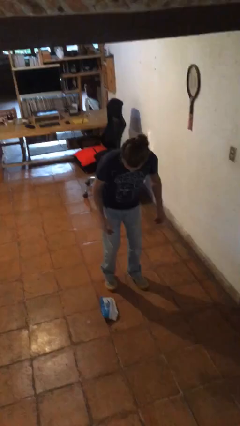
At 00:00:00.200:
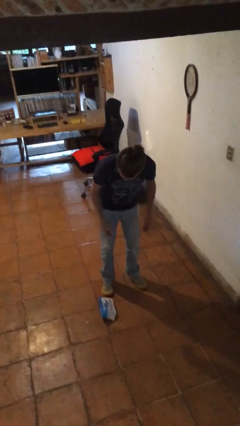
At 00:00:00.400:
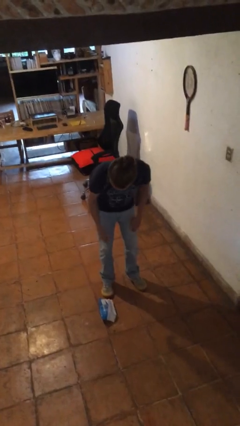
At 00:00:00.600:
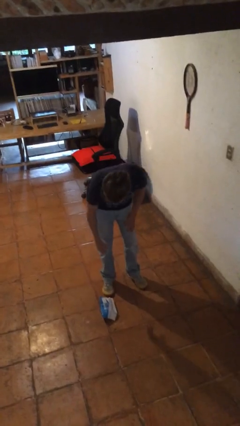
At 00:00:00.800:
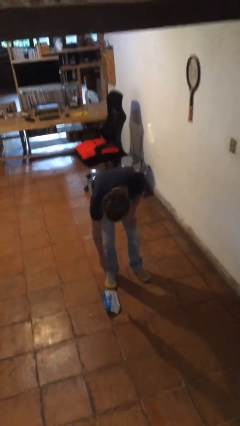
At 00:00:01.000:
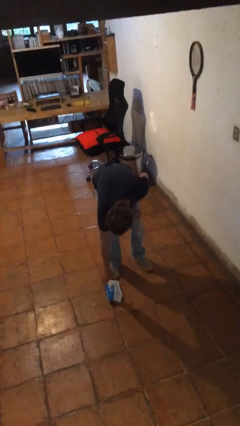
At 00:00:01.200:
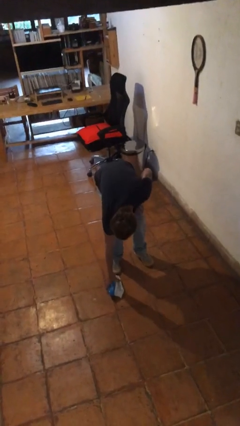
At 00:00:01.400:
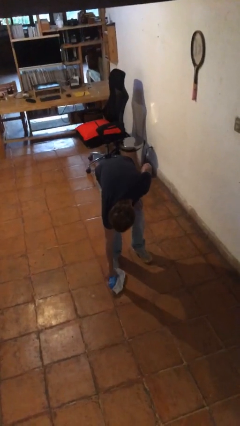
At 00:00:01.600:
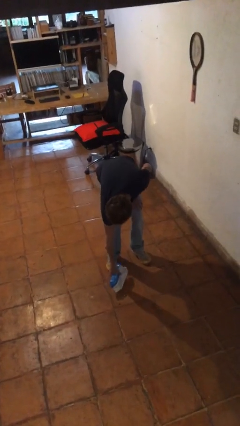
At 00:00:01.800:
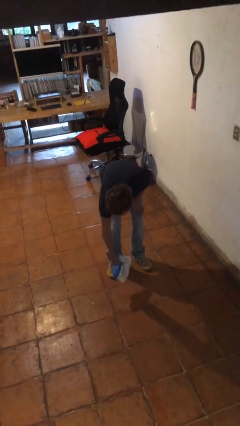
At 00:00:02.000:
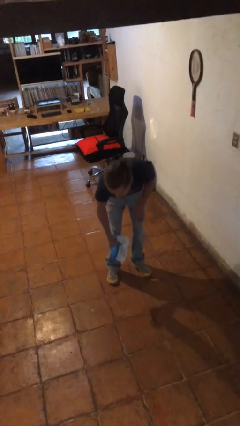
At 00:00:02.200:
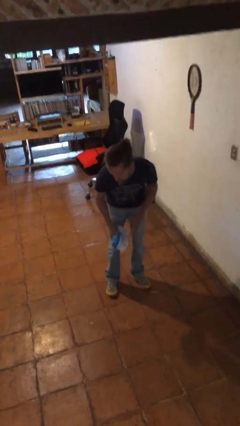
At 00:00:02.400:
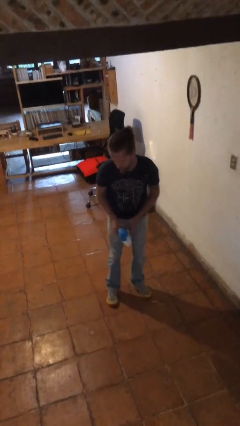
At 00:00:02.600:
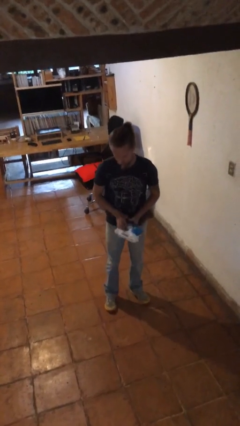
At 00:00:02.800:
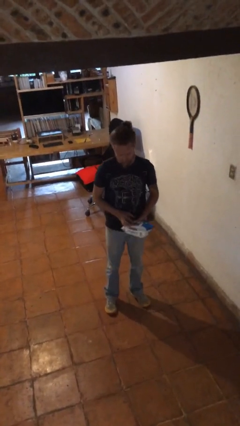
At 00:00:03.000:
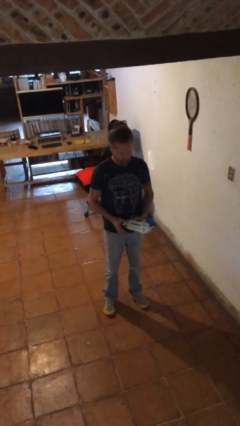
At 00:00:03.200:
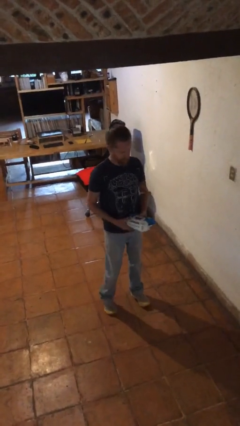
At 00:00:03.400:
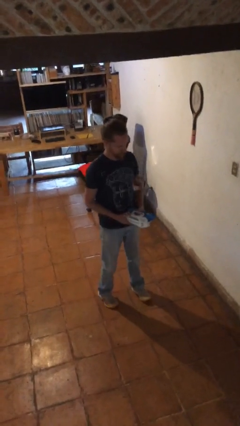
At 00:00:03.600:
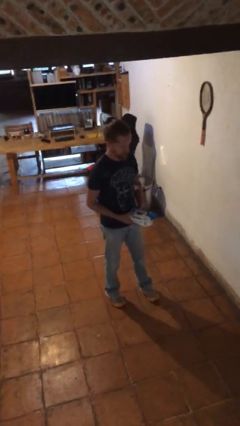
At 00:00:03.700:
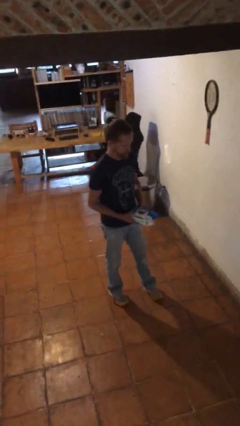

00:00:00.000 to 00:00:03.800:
person picks up object from floor

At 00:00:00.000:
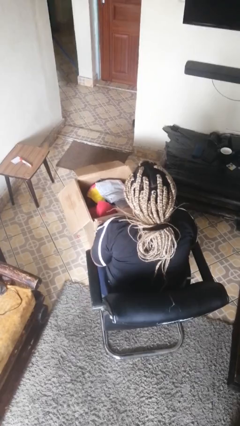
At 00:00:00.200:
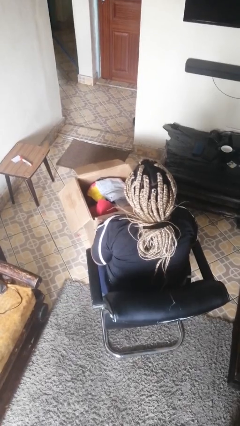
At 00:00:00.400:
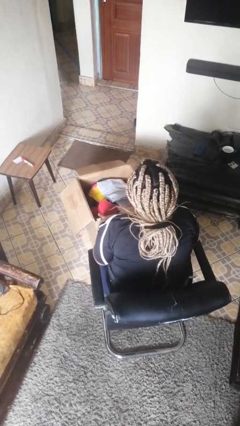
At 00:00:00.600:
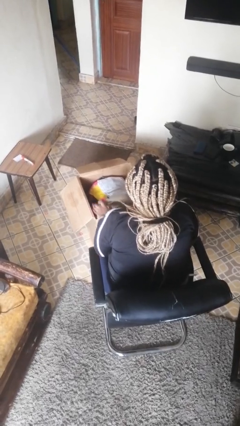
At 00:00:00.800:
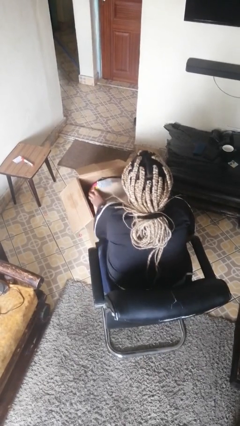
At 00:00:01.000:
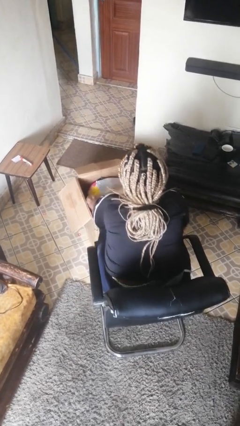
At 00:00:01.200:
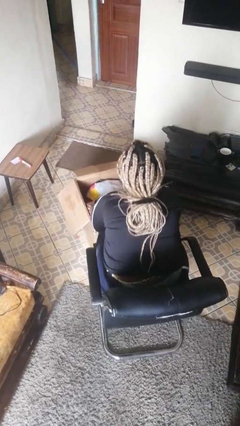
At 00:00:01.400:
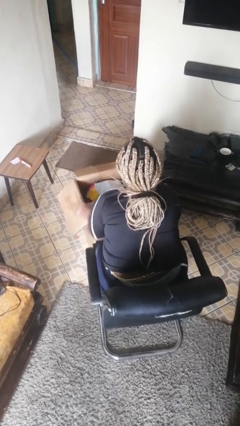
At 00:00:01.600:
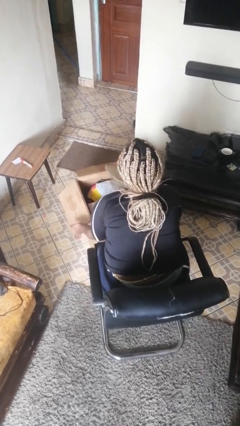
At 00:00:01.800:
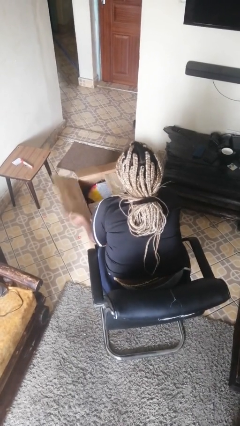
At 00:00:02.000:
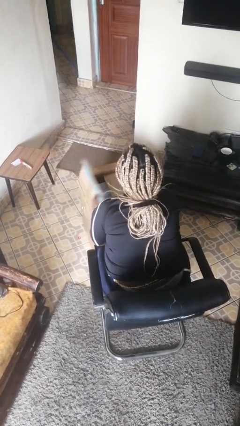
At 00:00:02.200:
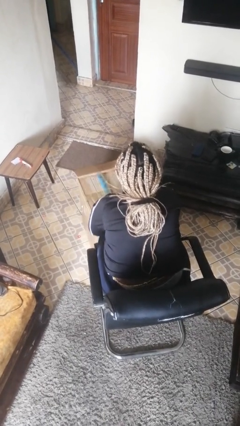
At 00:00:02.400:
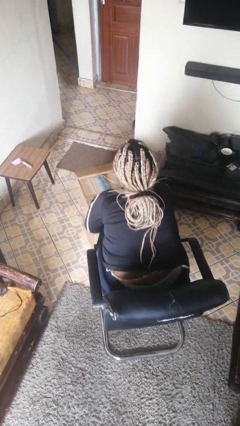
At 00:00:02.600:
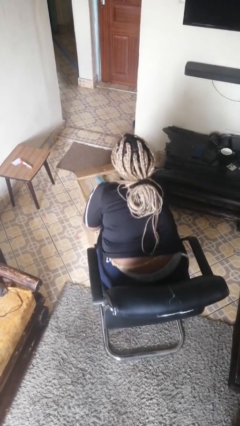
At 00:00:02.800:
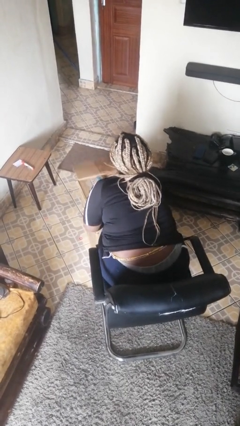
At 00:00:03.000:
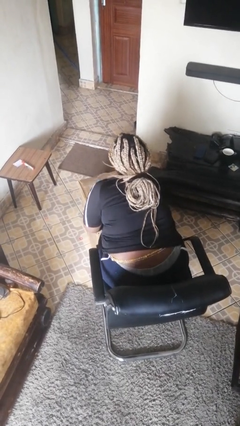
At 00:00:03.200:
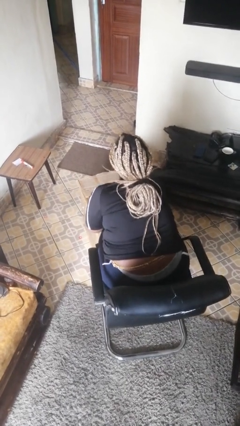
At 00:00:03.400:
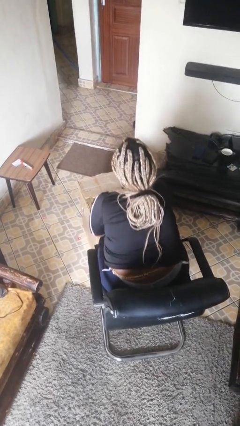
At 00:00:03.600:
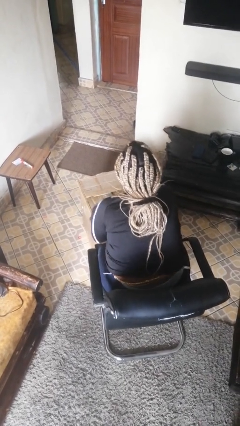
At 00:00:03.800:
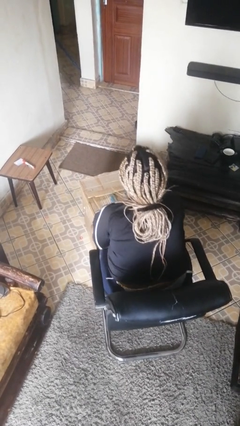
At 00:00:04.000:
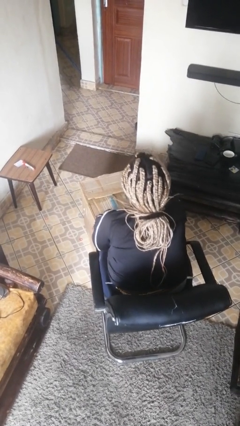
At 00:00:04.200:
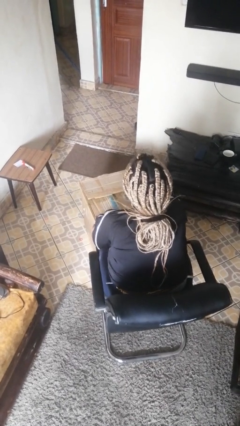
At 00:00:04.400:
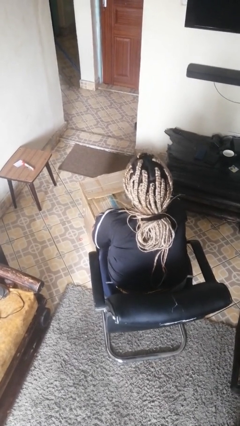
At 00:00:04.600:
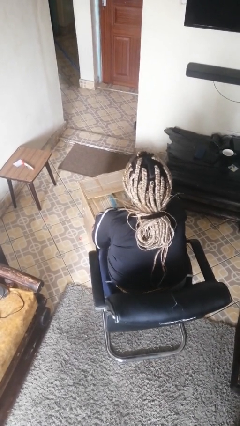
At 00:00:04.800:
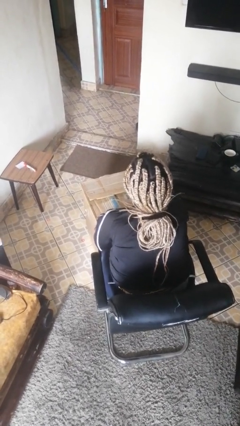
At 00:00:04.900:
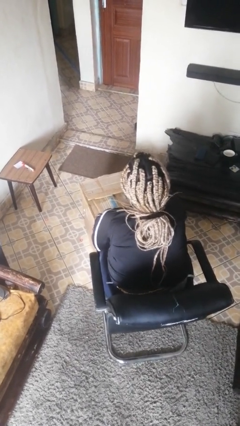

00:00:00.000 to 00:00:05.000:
person closes box

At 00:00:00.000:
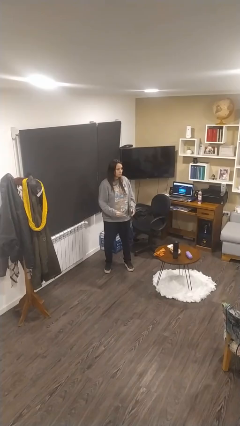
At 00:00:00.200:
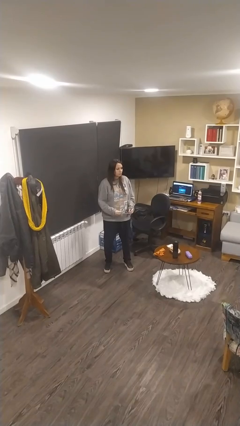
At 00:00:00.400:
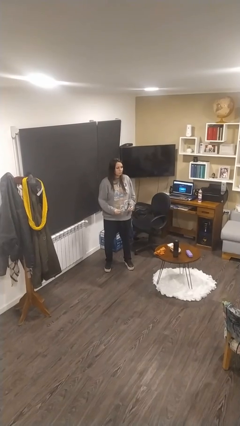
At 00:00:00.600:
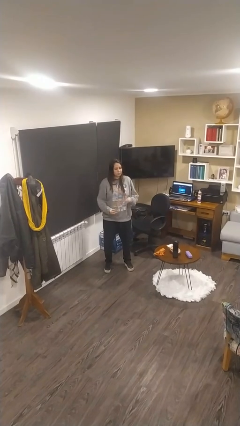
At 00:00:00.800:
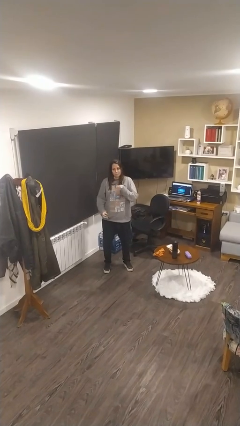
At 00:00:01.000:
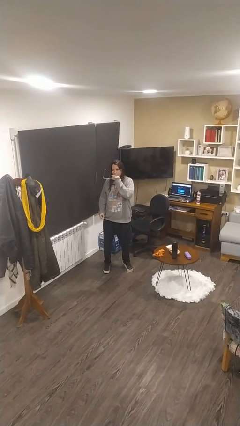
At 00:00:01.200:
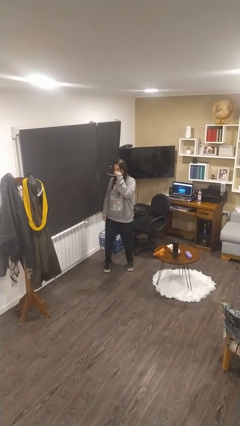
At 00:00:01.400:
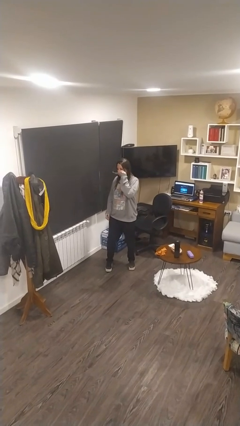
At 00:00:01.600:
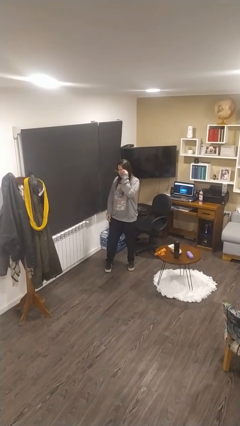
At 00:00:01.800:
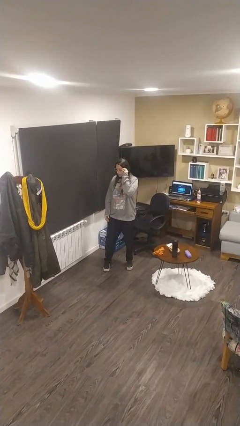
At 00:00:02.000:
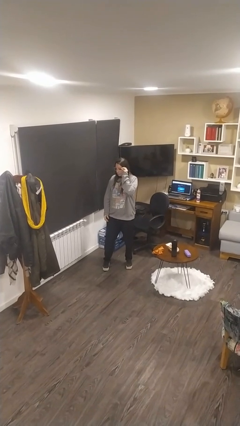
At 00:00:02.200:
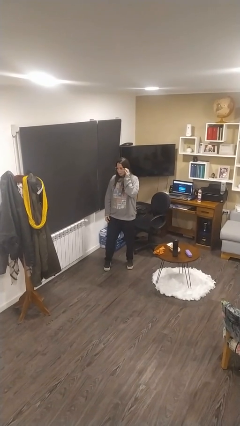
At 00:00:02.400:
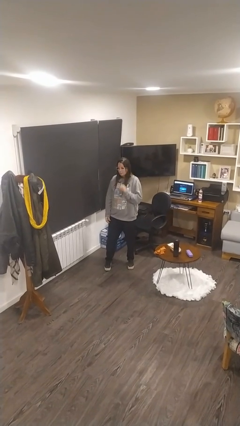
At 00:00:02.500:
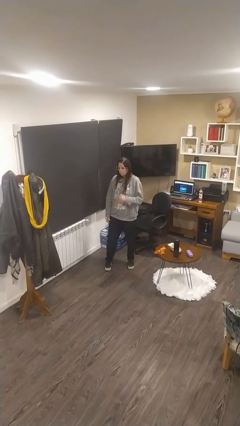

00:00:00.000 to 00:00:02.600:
person puts on glasses

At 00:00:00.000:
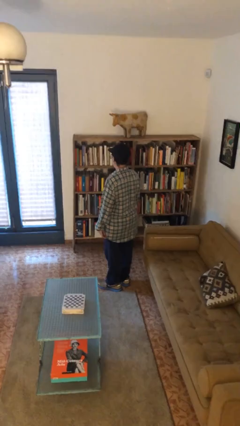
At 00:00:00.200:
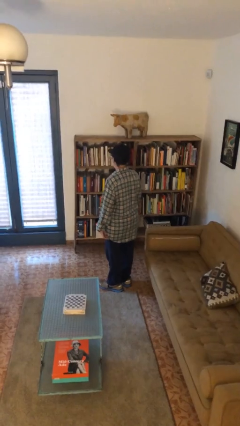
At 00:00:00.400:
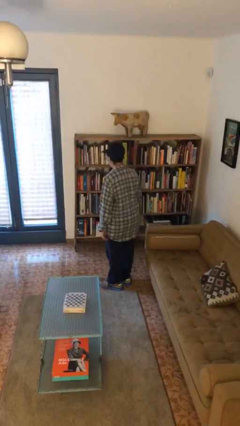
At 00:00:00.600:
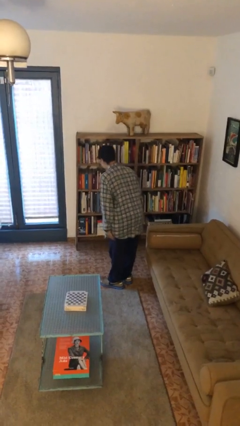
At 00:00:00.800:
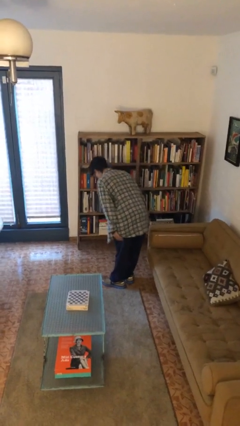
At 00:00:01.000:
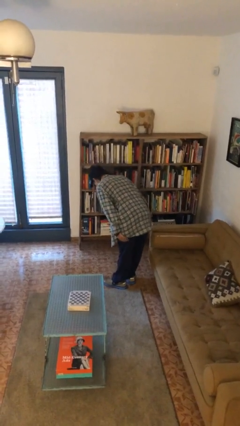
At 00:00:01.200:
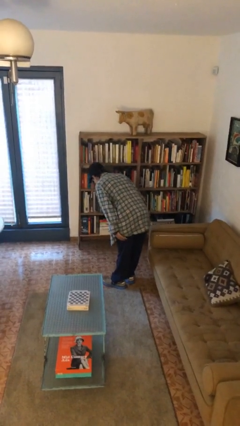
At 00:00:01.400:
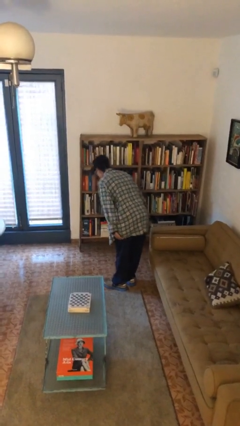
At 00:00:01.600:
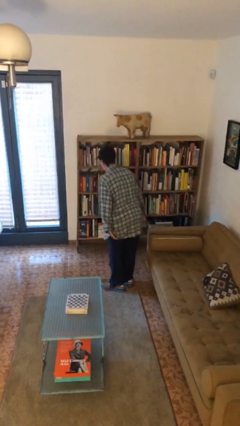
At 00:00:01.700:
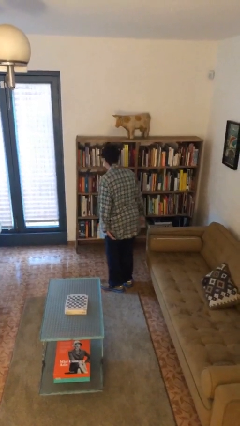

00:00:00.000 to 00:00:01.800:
person bows

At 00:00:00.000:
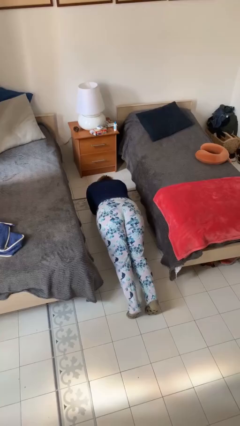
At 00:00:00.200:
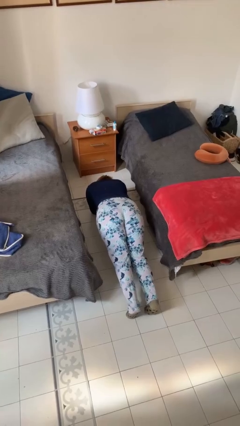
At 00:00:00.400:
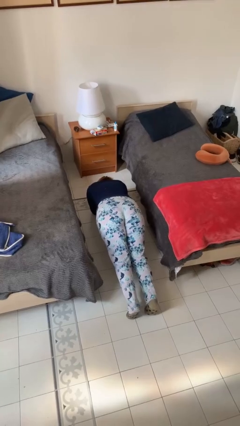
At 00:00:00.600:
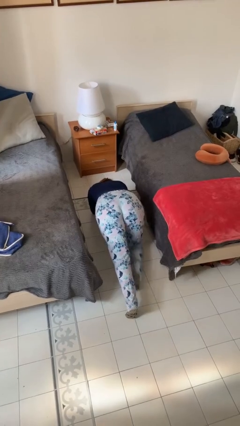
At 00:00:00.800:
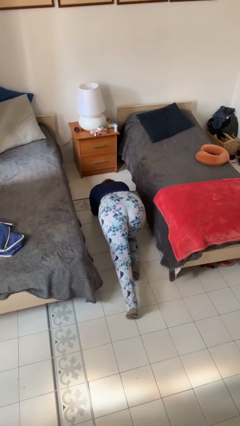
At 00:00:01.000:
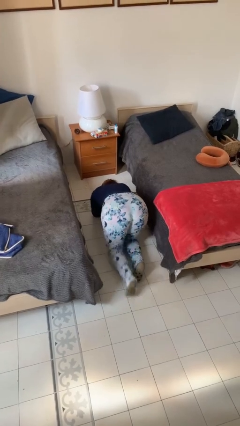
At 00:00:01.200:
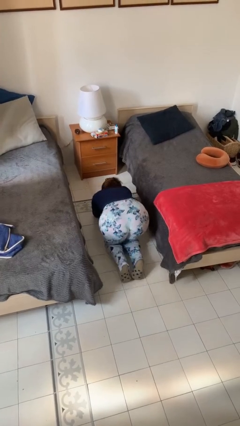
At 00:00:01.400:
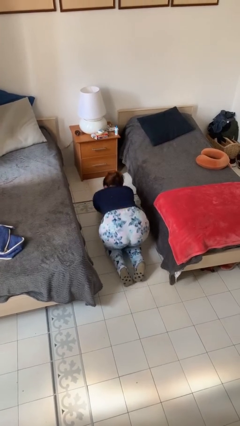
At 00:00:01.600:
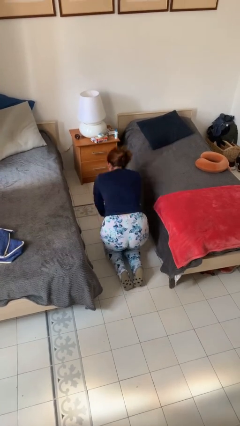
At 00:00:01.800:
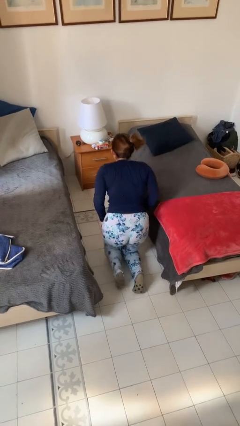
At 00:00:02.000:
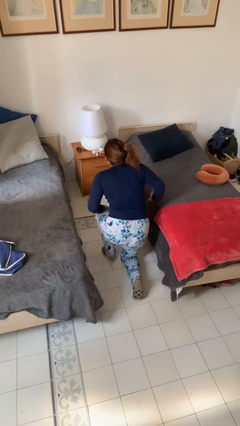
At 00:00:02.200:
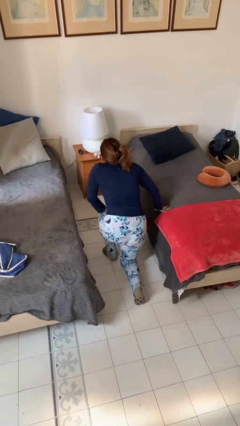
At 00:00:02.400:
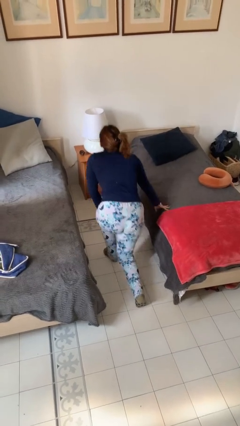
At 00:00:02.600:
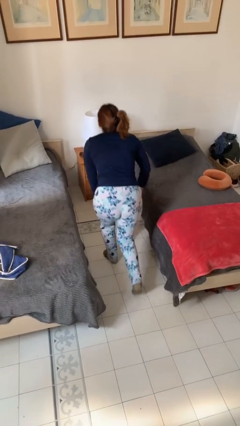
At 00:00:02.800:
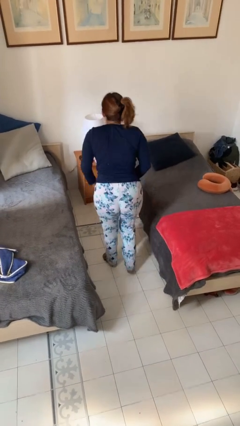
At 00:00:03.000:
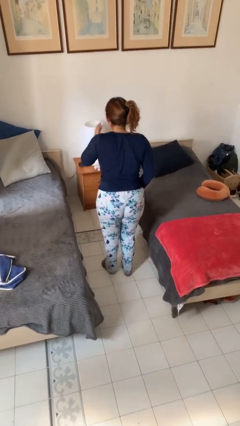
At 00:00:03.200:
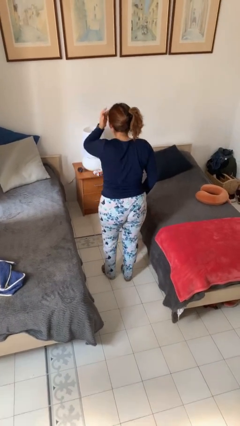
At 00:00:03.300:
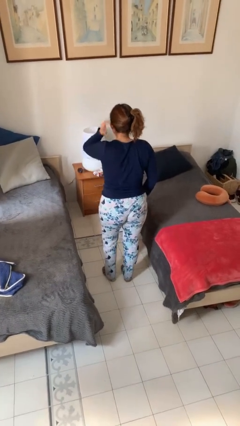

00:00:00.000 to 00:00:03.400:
person stands up from floor
